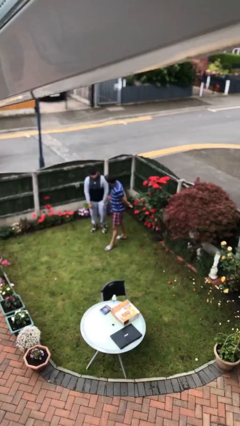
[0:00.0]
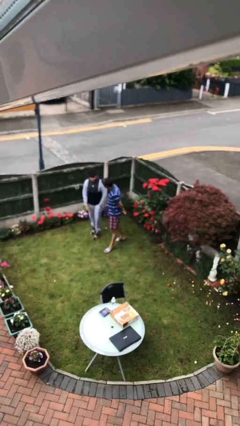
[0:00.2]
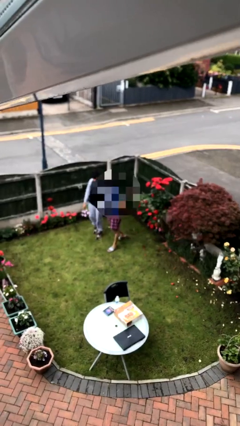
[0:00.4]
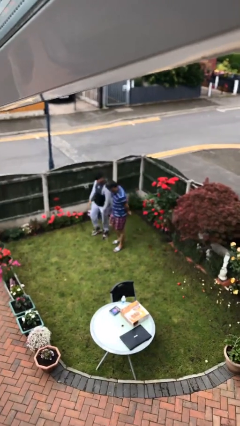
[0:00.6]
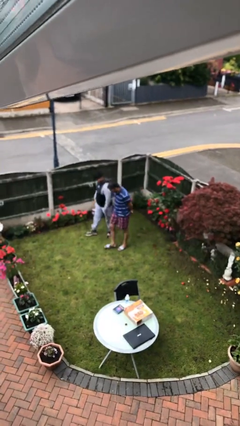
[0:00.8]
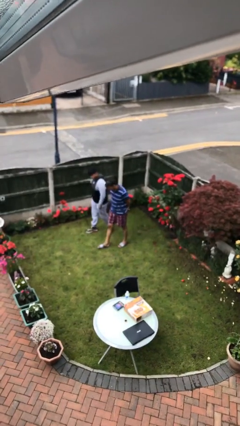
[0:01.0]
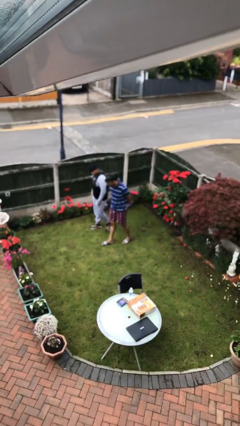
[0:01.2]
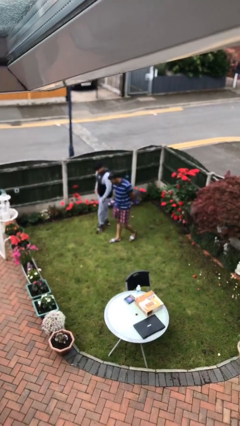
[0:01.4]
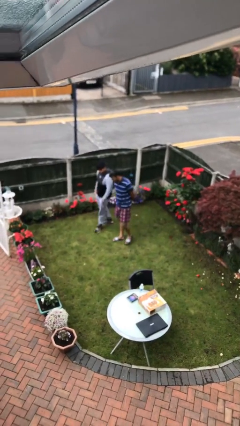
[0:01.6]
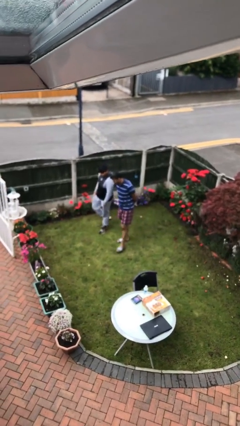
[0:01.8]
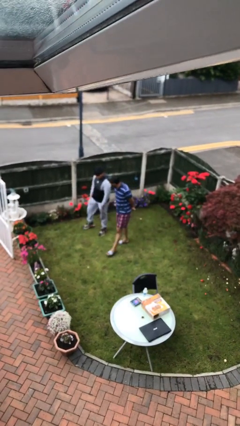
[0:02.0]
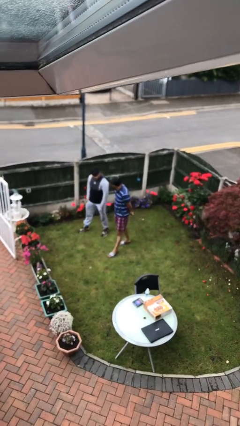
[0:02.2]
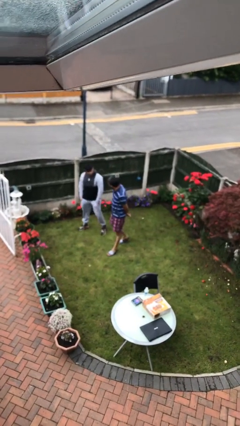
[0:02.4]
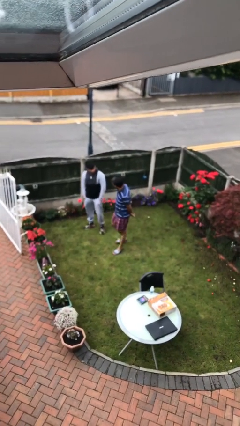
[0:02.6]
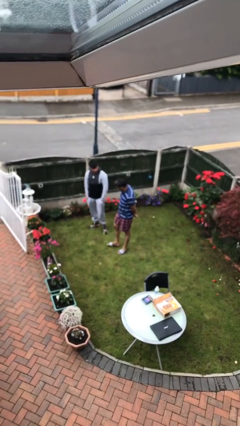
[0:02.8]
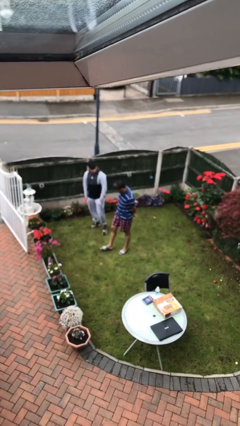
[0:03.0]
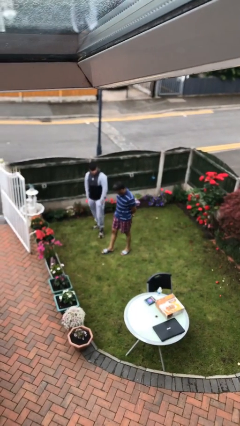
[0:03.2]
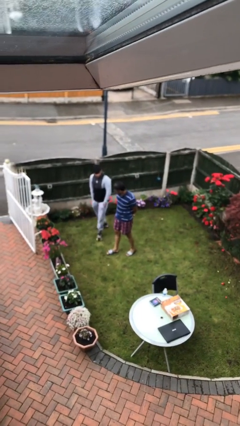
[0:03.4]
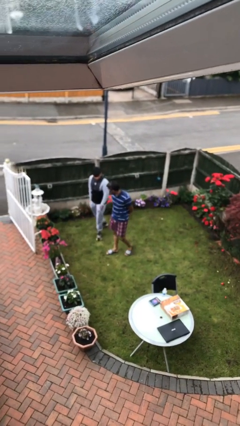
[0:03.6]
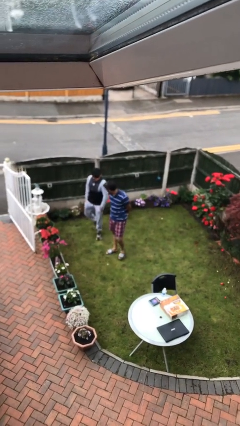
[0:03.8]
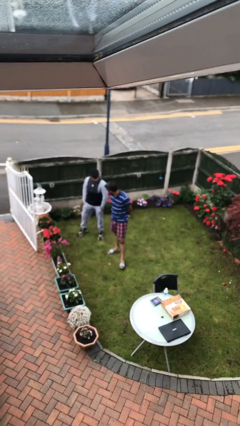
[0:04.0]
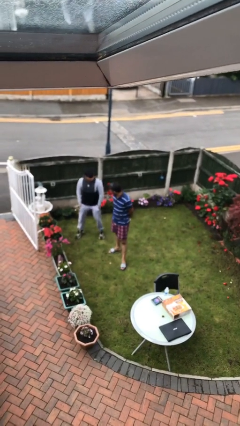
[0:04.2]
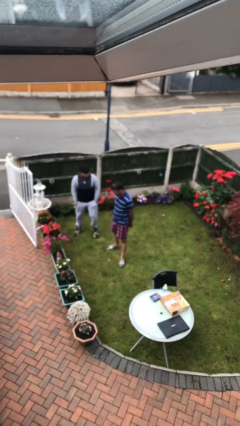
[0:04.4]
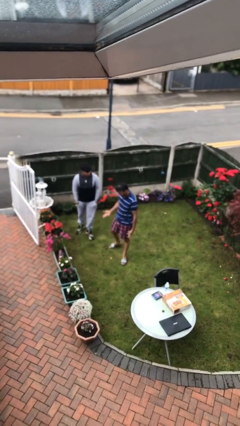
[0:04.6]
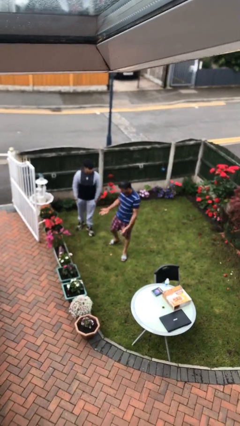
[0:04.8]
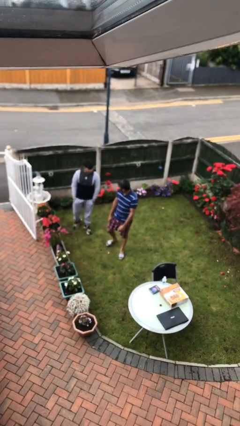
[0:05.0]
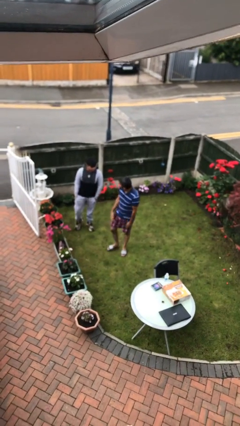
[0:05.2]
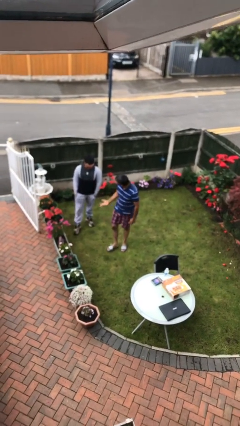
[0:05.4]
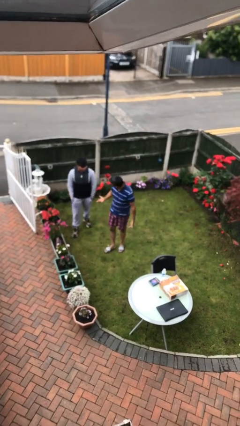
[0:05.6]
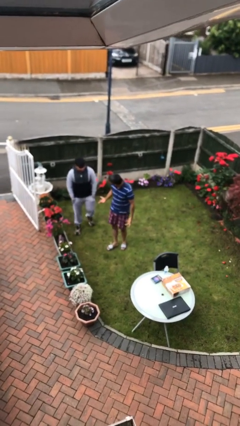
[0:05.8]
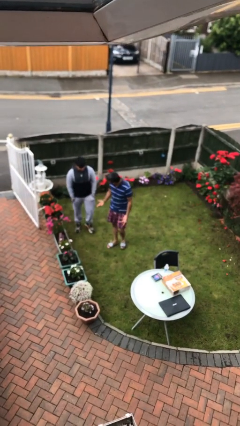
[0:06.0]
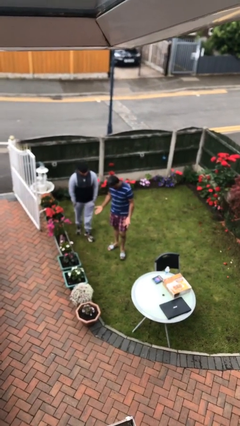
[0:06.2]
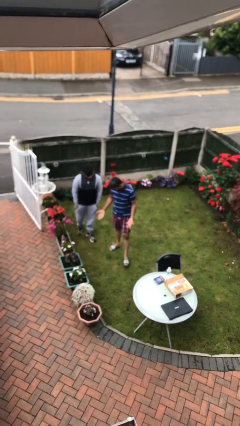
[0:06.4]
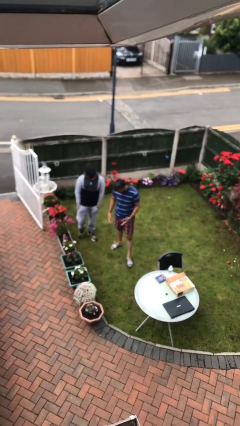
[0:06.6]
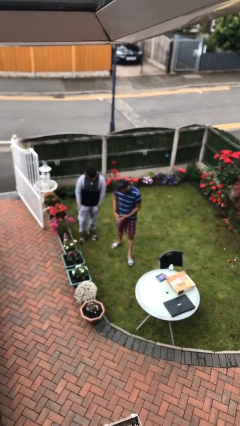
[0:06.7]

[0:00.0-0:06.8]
person talks to person

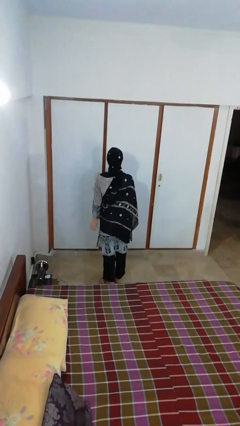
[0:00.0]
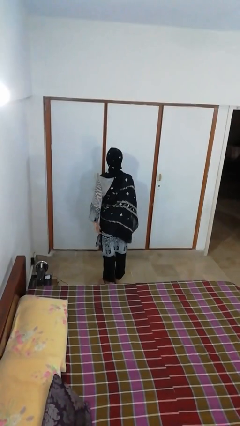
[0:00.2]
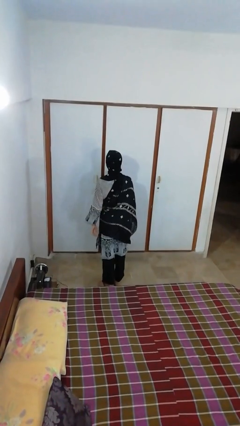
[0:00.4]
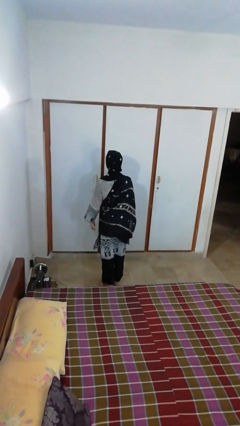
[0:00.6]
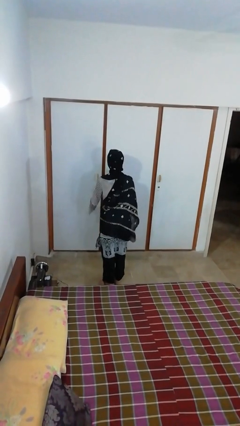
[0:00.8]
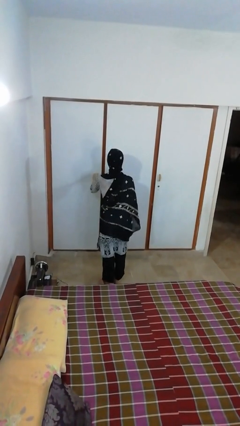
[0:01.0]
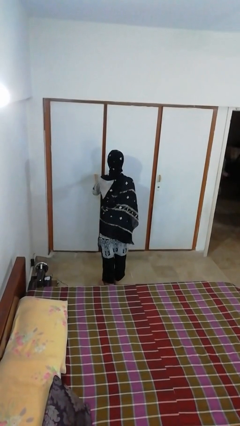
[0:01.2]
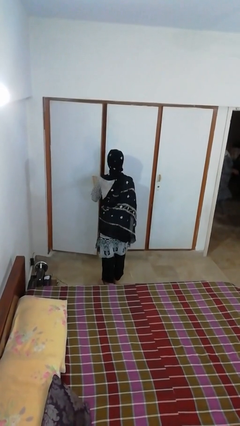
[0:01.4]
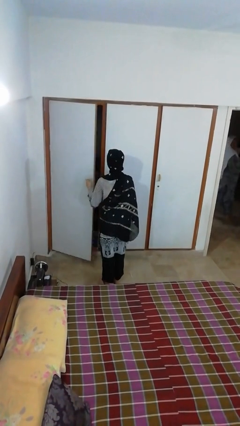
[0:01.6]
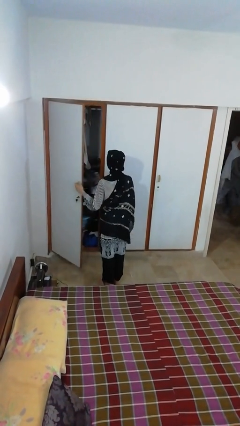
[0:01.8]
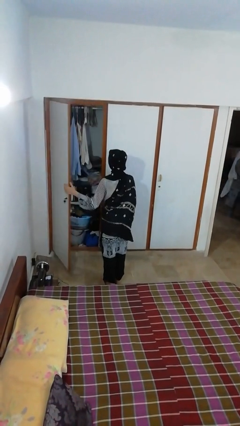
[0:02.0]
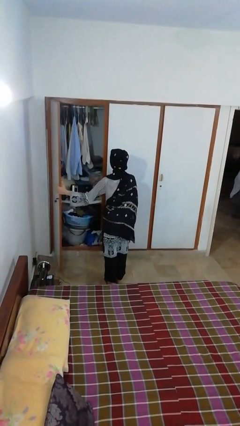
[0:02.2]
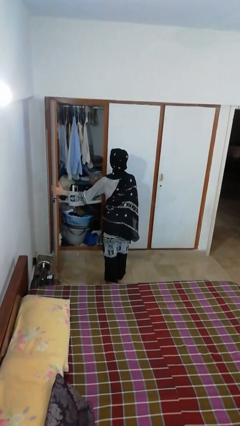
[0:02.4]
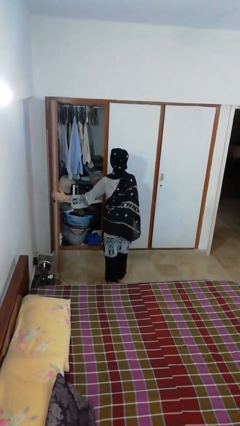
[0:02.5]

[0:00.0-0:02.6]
person opens closet door

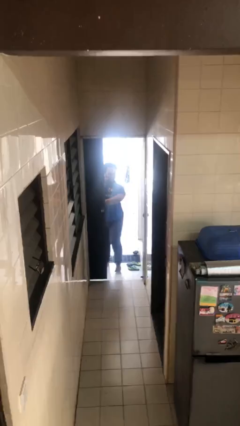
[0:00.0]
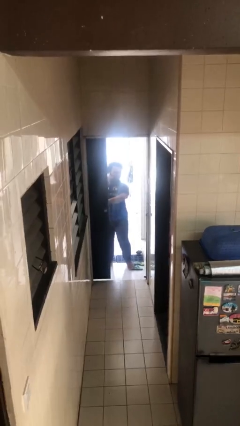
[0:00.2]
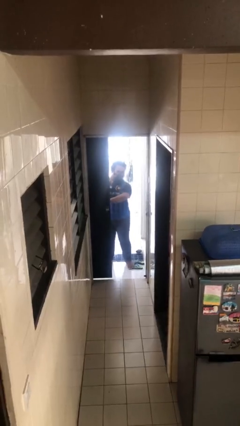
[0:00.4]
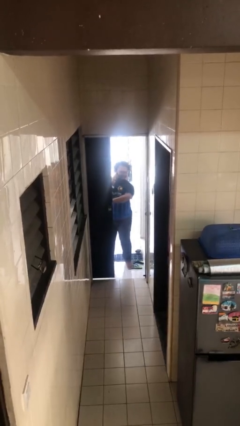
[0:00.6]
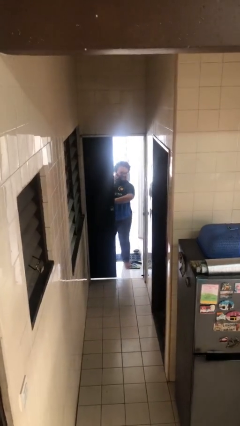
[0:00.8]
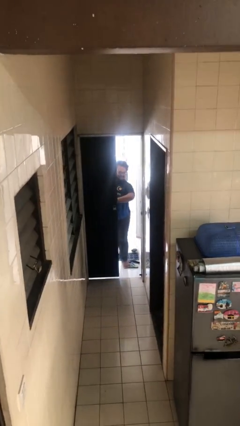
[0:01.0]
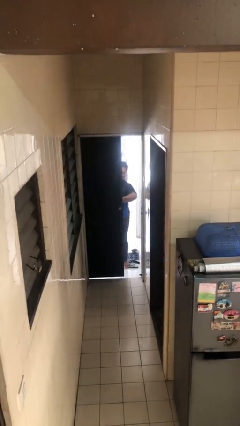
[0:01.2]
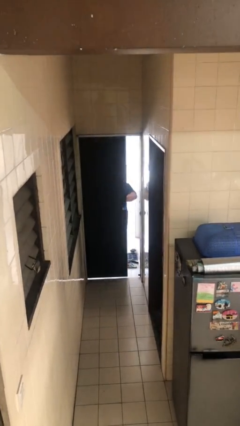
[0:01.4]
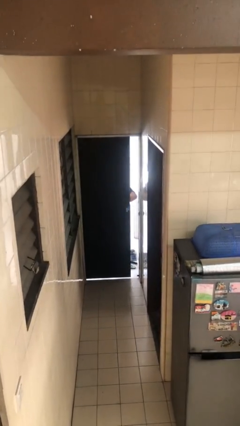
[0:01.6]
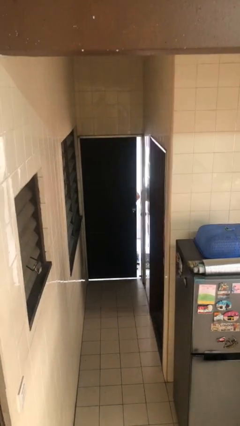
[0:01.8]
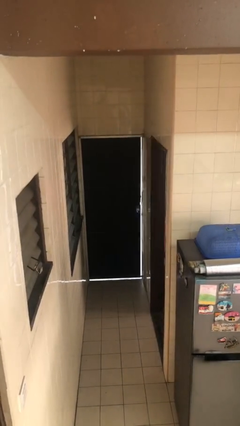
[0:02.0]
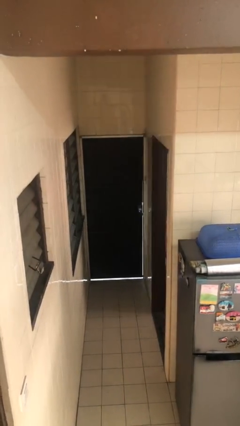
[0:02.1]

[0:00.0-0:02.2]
person closes facility door

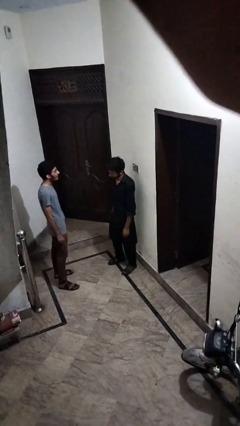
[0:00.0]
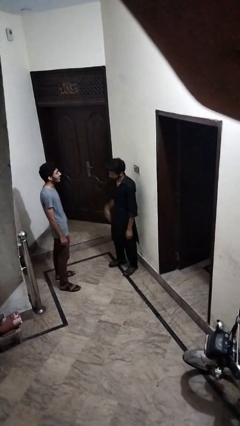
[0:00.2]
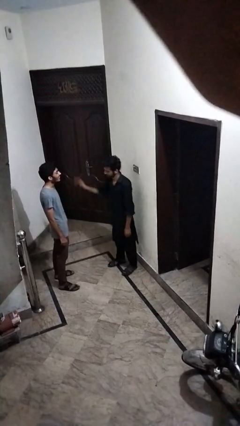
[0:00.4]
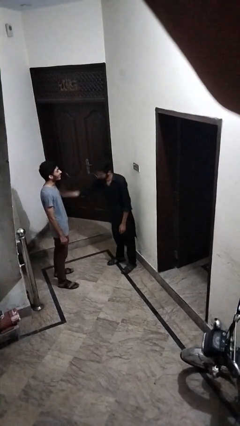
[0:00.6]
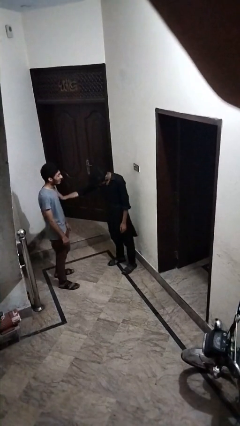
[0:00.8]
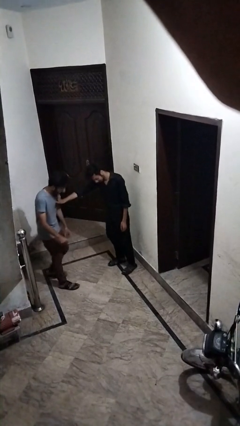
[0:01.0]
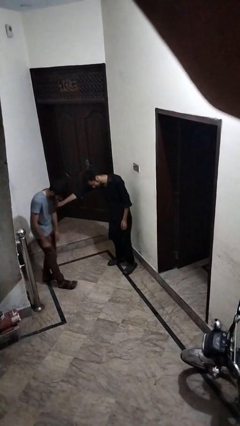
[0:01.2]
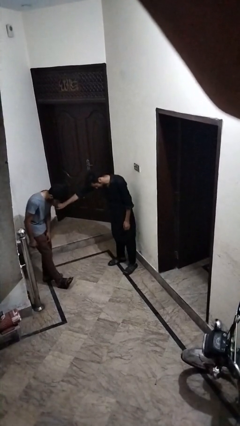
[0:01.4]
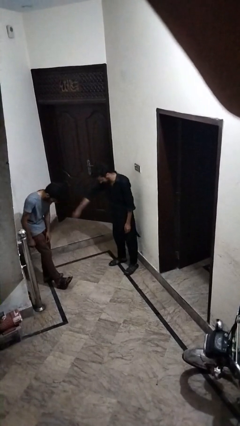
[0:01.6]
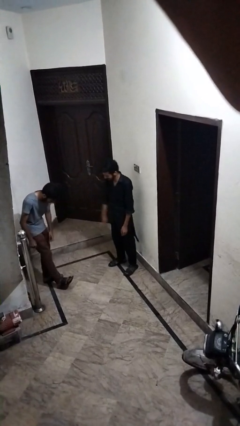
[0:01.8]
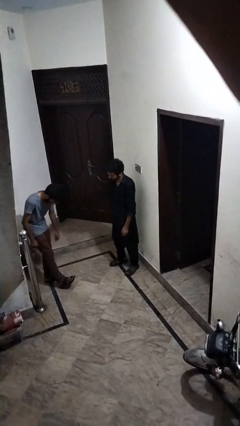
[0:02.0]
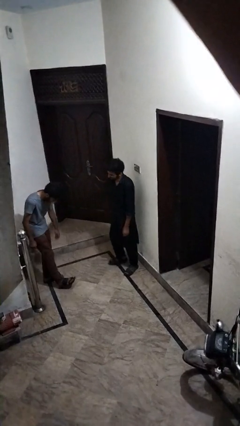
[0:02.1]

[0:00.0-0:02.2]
person shoves person

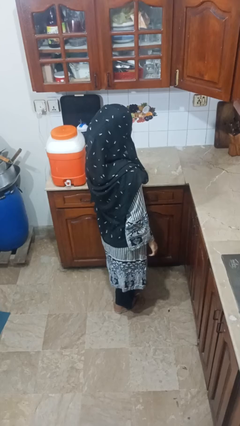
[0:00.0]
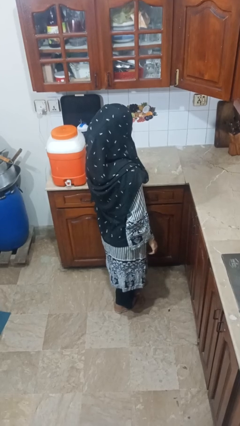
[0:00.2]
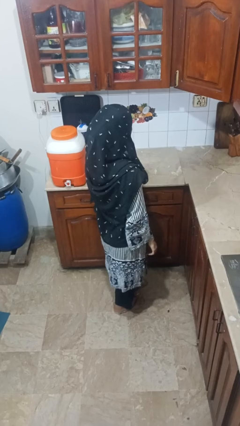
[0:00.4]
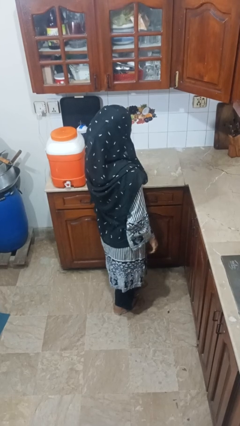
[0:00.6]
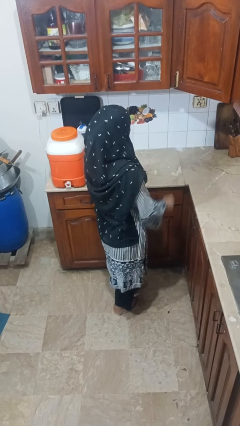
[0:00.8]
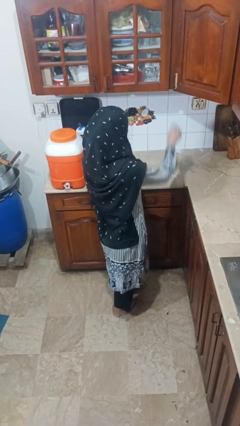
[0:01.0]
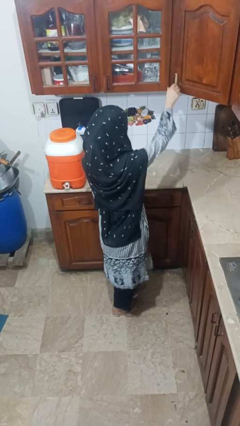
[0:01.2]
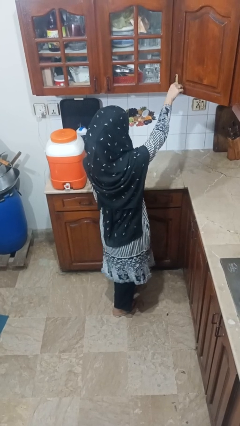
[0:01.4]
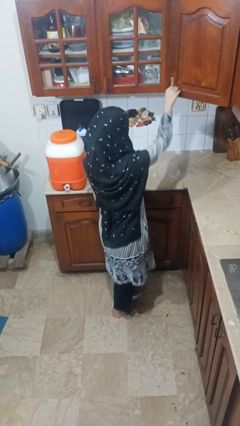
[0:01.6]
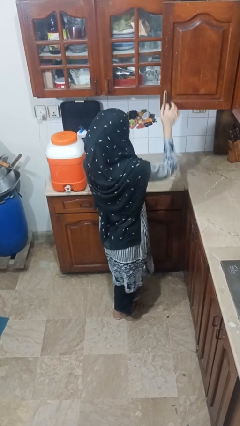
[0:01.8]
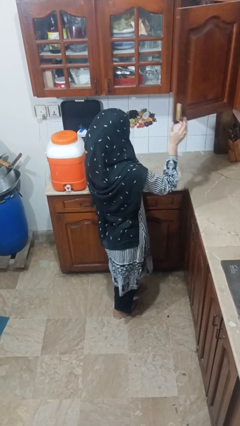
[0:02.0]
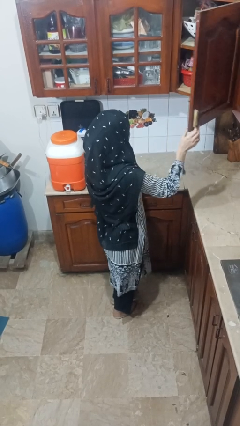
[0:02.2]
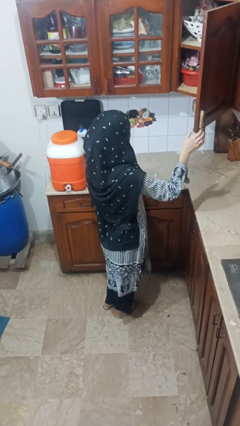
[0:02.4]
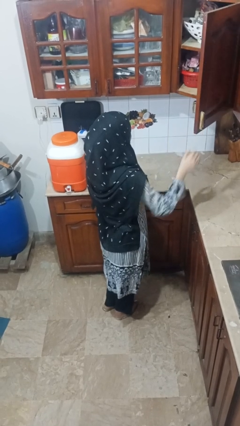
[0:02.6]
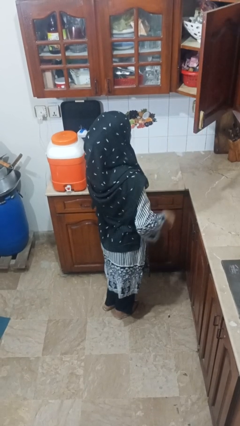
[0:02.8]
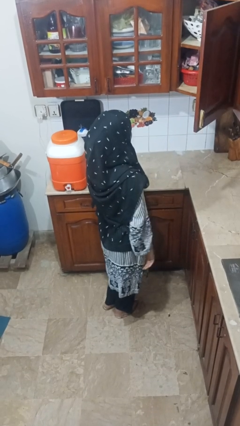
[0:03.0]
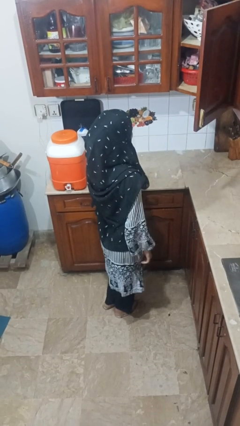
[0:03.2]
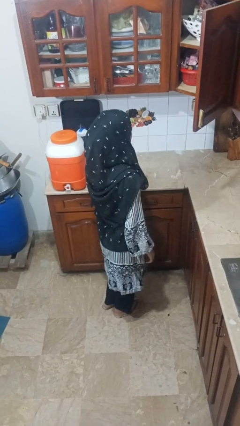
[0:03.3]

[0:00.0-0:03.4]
person opens cabinet

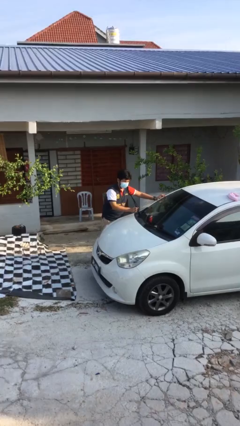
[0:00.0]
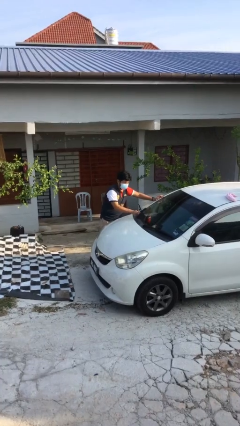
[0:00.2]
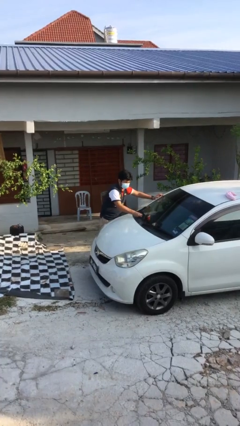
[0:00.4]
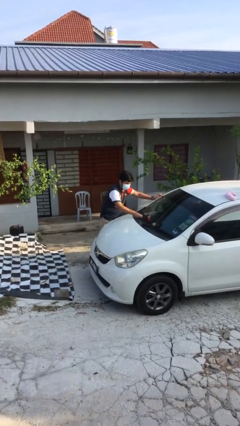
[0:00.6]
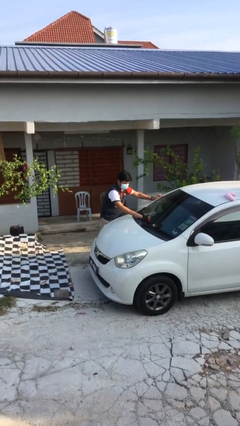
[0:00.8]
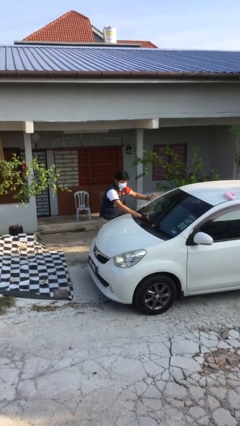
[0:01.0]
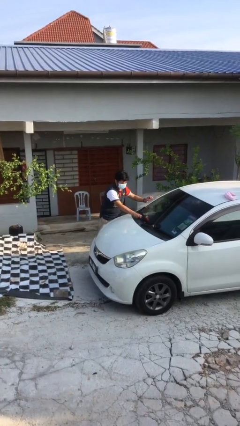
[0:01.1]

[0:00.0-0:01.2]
person flips down car wipers
